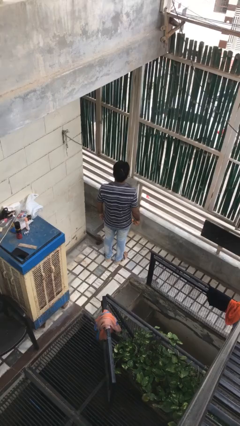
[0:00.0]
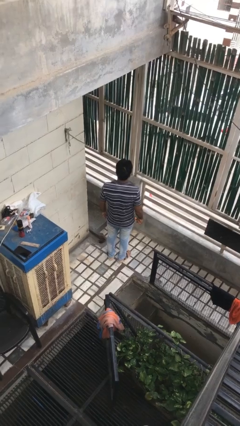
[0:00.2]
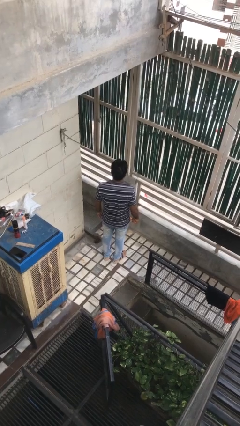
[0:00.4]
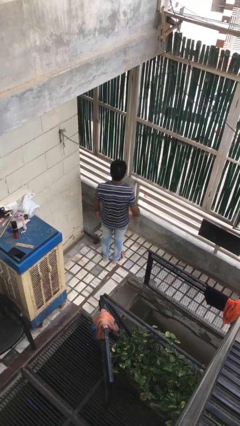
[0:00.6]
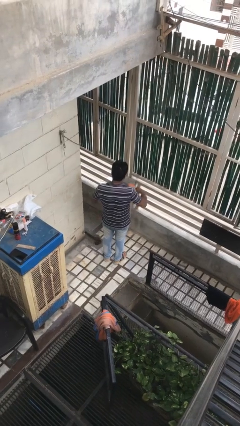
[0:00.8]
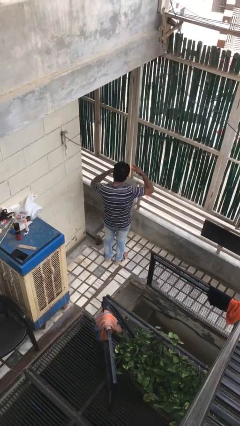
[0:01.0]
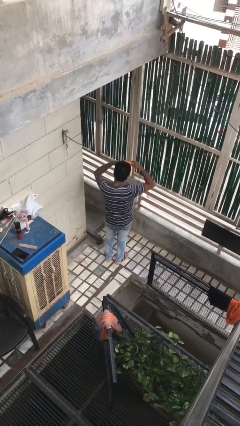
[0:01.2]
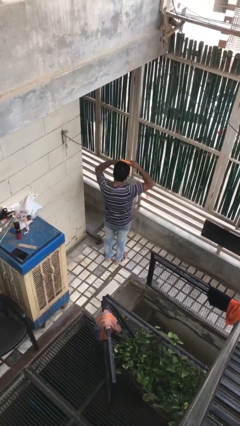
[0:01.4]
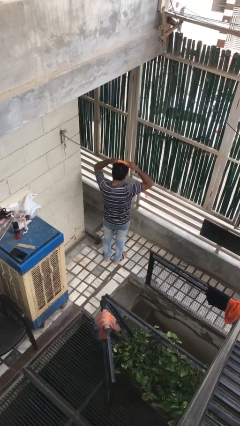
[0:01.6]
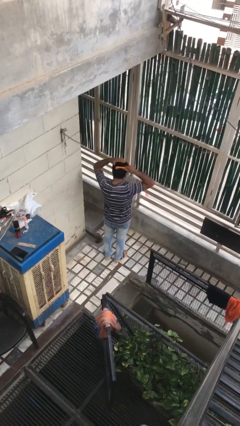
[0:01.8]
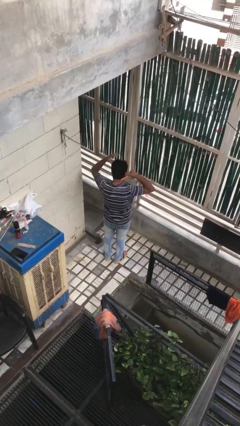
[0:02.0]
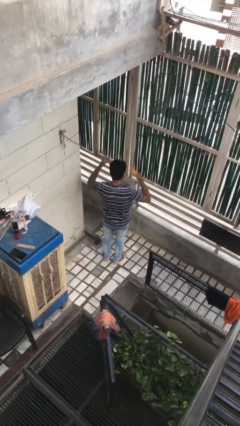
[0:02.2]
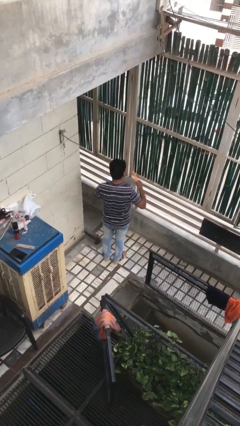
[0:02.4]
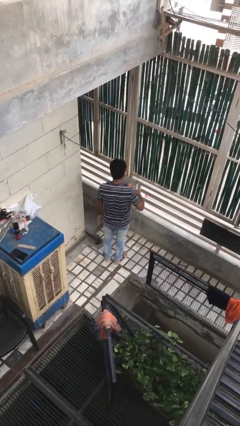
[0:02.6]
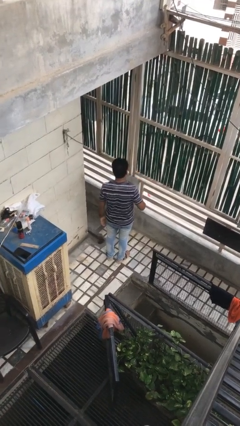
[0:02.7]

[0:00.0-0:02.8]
person brushes hair

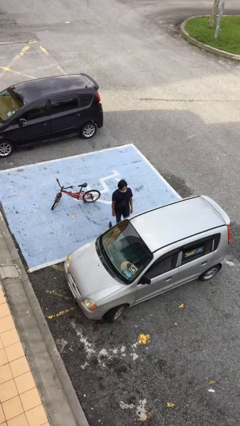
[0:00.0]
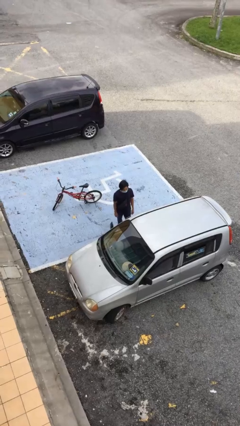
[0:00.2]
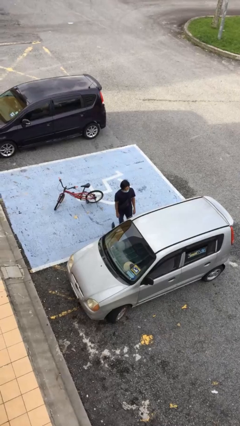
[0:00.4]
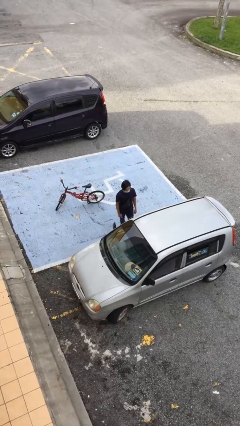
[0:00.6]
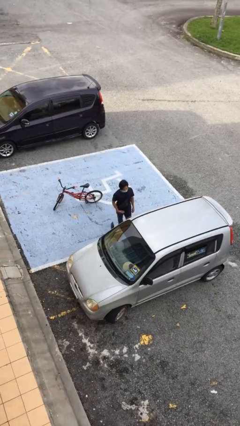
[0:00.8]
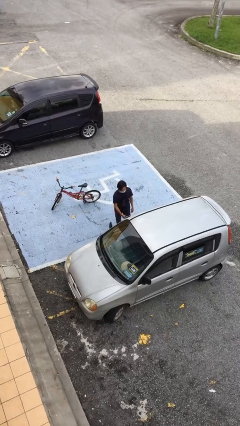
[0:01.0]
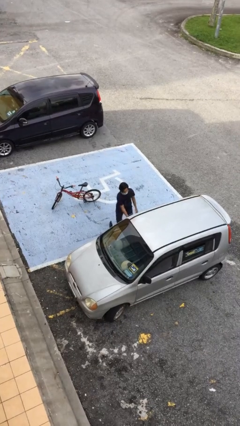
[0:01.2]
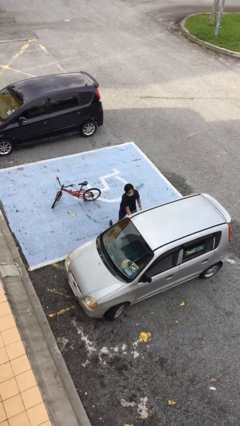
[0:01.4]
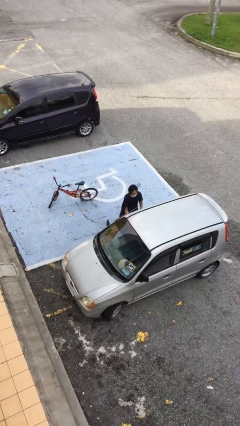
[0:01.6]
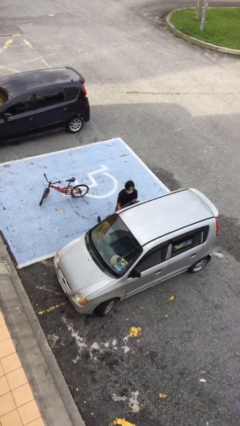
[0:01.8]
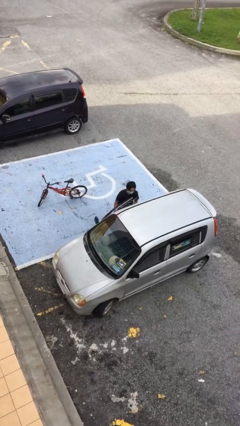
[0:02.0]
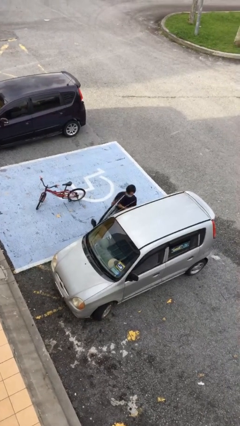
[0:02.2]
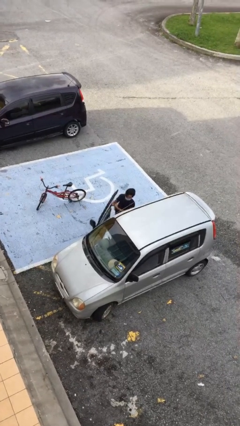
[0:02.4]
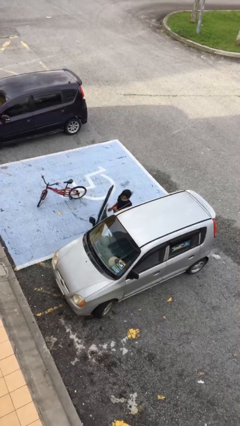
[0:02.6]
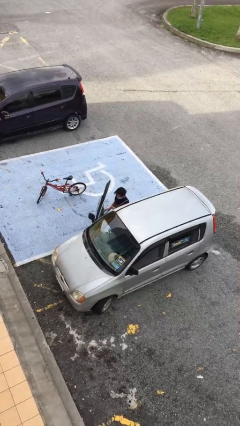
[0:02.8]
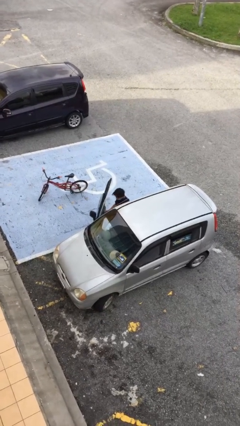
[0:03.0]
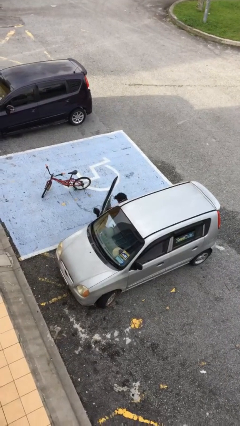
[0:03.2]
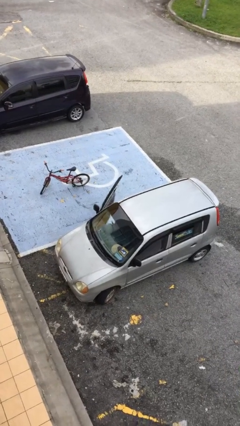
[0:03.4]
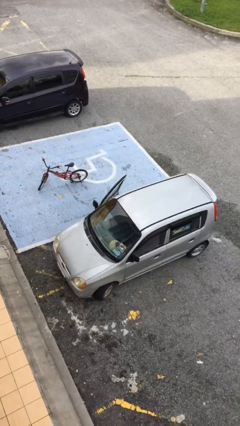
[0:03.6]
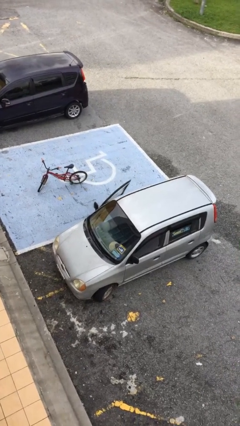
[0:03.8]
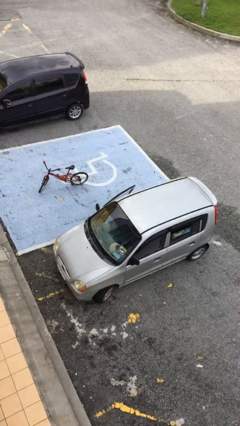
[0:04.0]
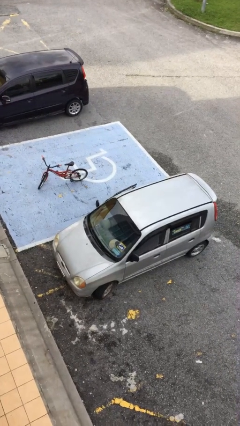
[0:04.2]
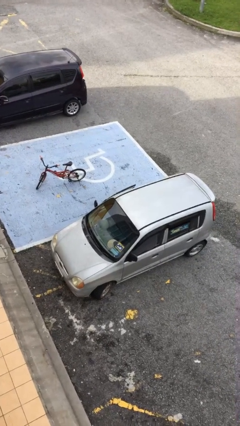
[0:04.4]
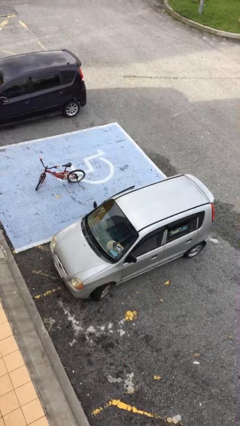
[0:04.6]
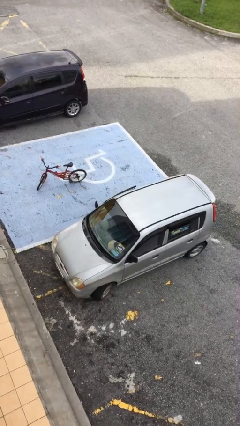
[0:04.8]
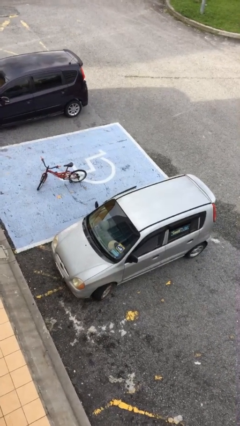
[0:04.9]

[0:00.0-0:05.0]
person enters car

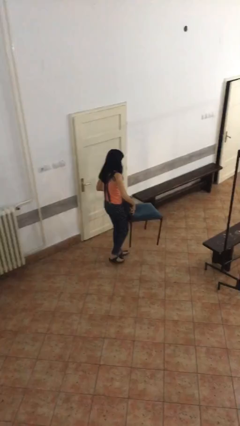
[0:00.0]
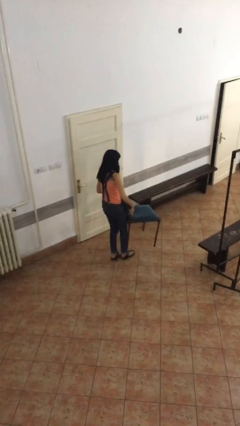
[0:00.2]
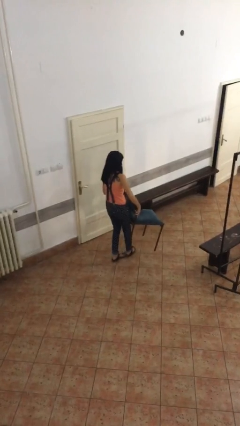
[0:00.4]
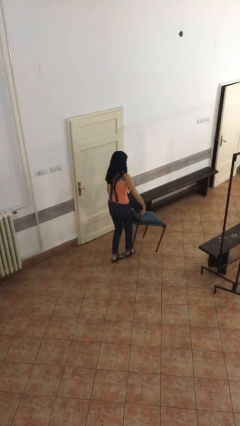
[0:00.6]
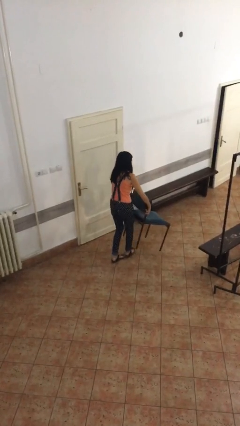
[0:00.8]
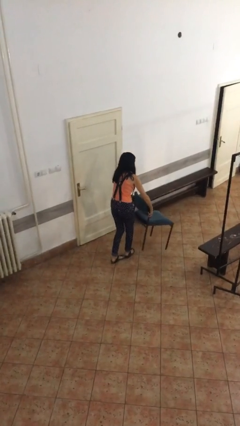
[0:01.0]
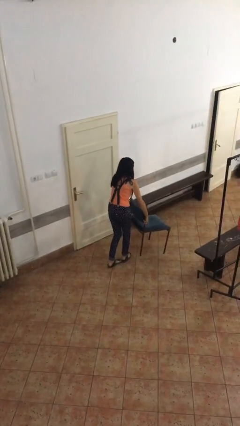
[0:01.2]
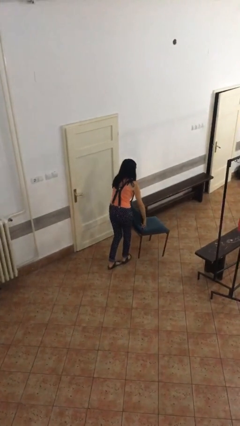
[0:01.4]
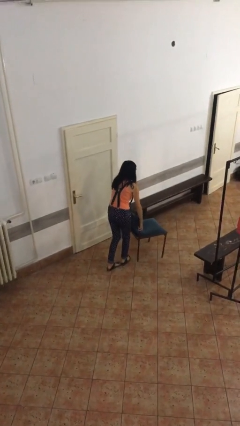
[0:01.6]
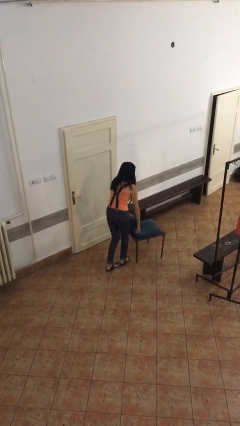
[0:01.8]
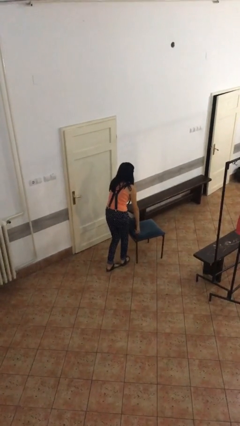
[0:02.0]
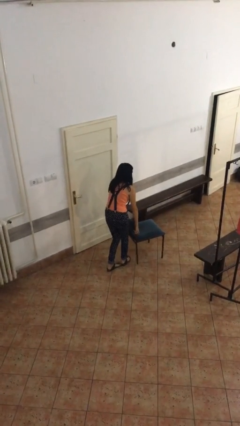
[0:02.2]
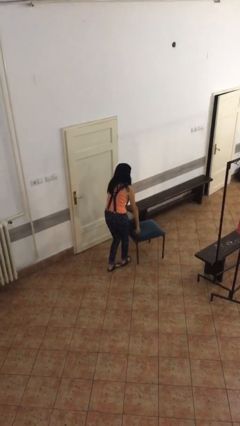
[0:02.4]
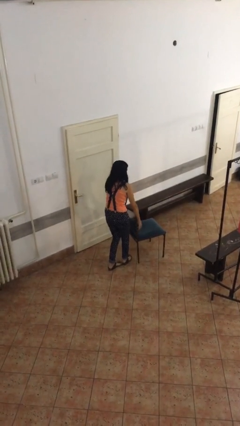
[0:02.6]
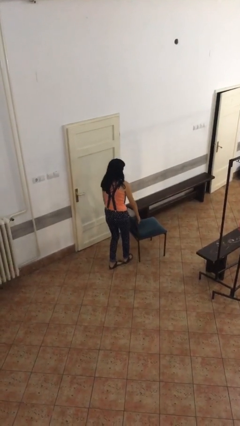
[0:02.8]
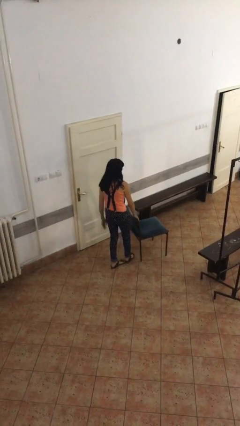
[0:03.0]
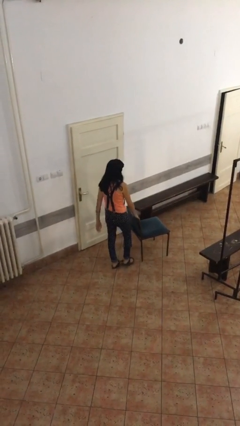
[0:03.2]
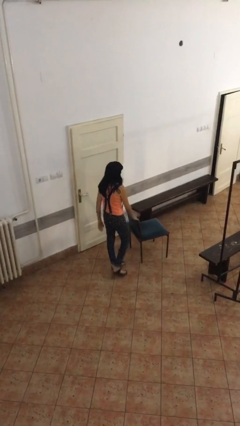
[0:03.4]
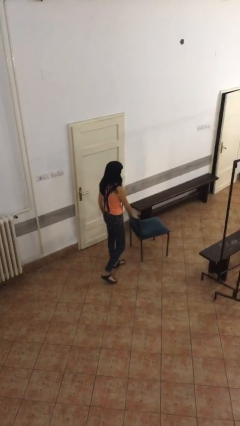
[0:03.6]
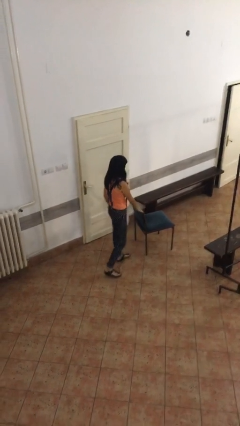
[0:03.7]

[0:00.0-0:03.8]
person puts down object on floor

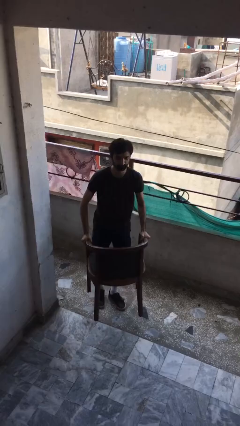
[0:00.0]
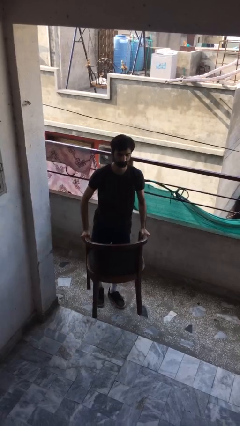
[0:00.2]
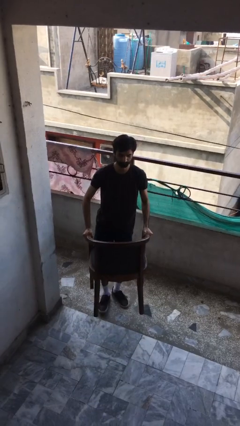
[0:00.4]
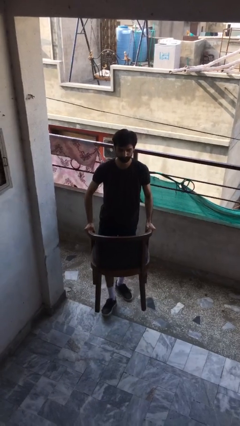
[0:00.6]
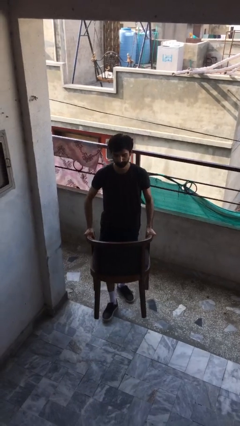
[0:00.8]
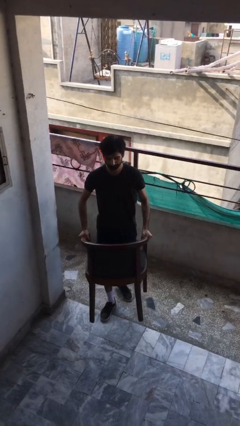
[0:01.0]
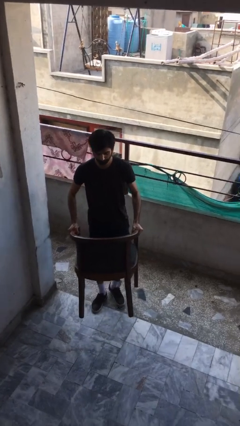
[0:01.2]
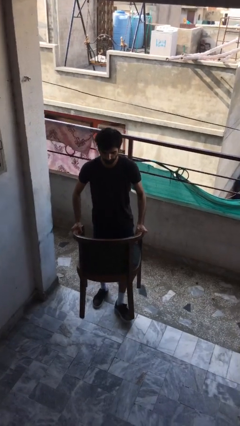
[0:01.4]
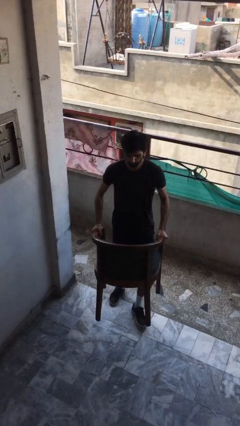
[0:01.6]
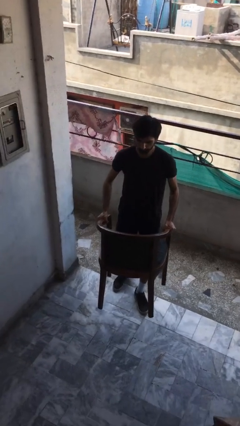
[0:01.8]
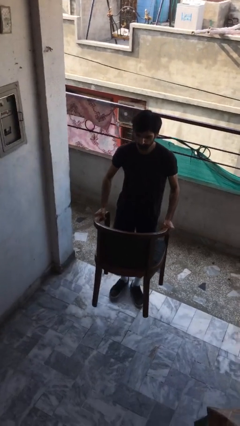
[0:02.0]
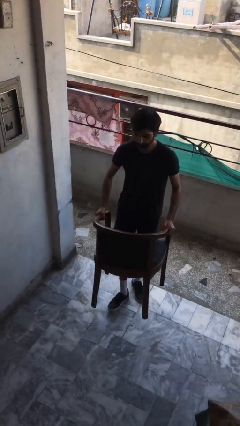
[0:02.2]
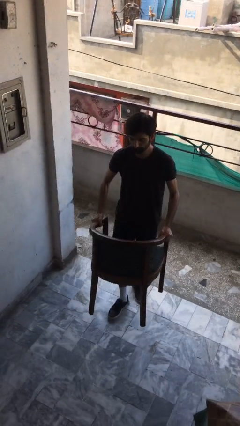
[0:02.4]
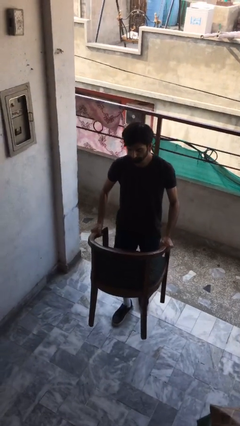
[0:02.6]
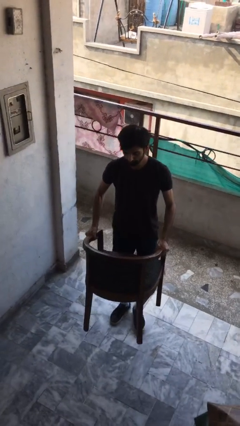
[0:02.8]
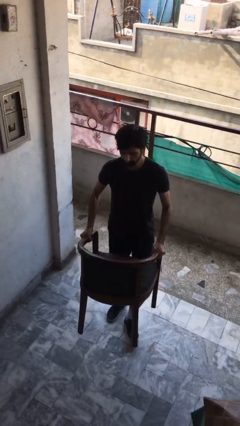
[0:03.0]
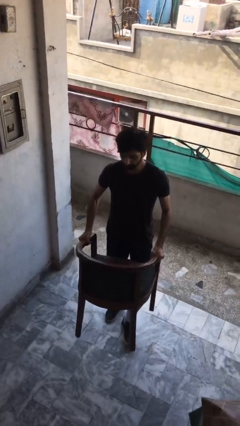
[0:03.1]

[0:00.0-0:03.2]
person carries heavy object

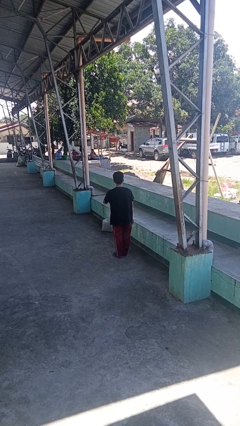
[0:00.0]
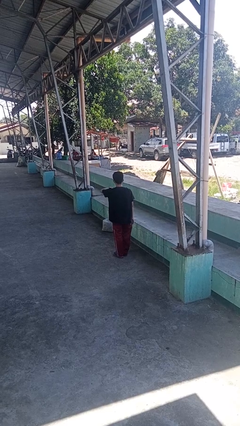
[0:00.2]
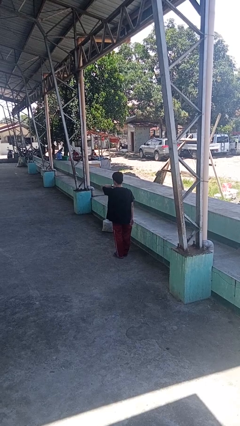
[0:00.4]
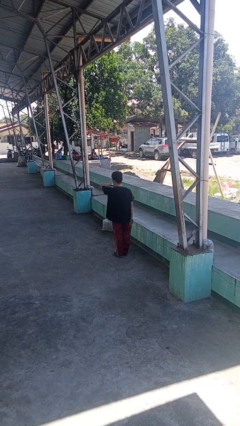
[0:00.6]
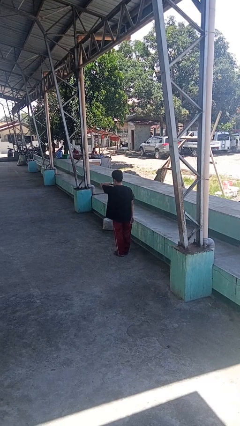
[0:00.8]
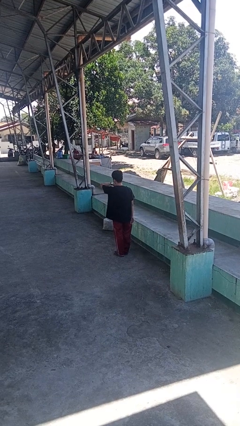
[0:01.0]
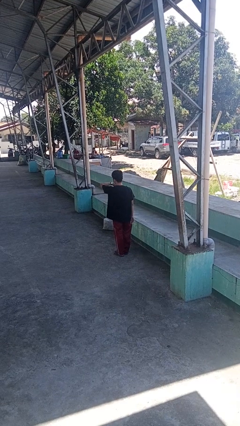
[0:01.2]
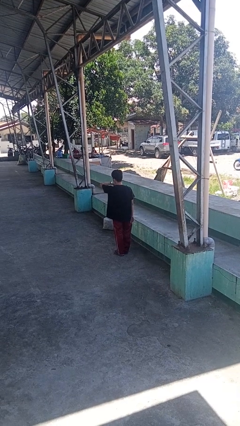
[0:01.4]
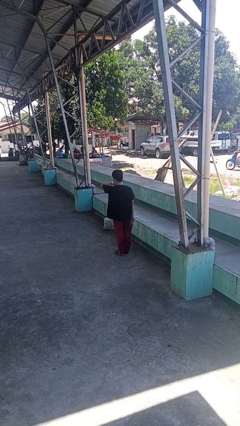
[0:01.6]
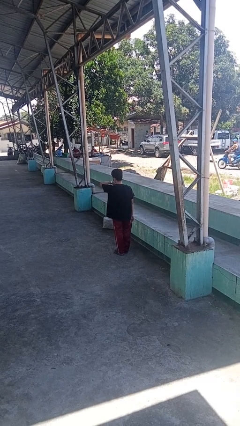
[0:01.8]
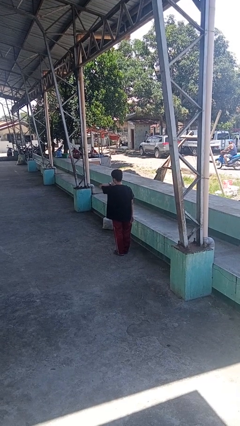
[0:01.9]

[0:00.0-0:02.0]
person looks at wristwatch

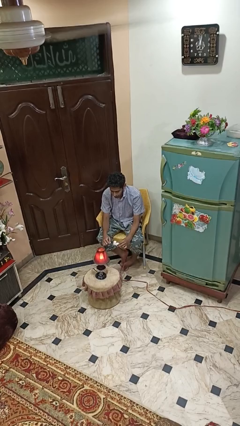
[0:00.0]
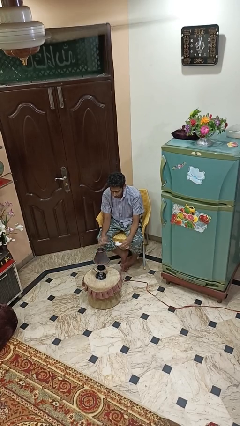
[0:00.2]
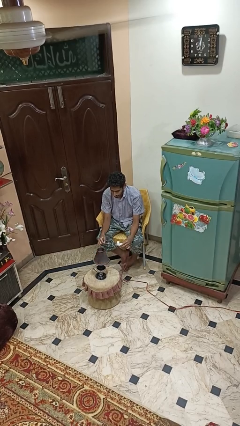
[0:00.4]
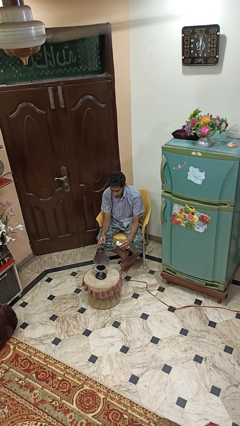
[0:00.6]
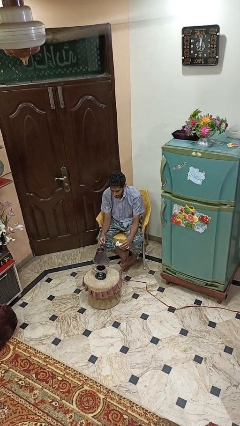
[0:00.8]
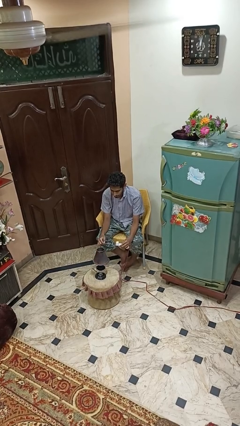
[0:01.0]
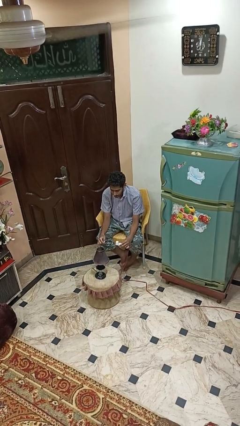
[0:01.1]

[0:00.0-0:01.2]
person turns off lamp
